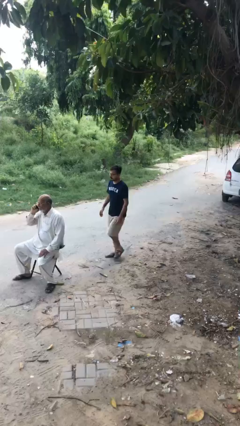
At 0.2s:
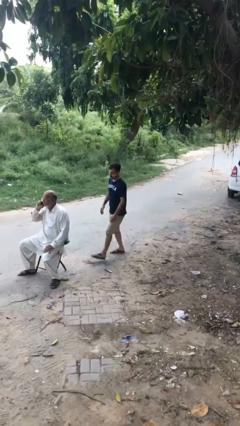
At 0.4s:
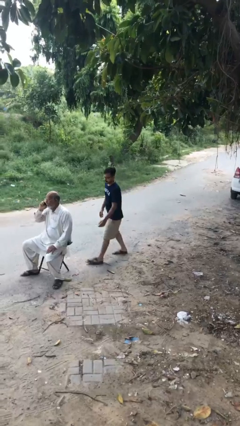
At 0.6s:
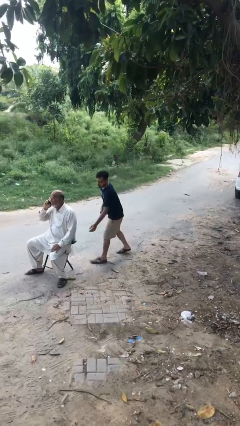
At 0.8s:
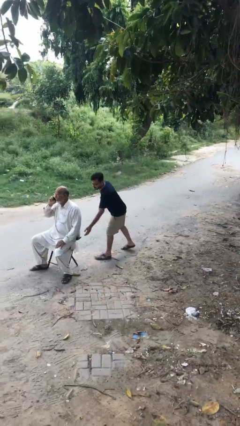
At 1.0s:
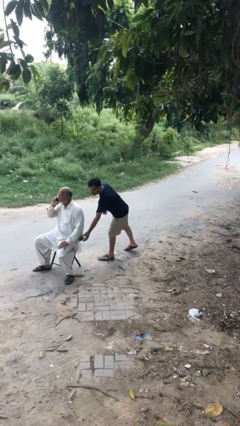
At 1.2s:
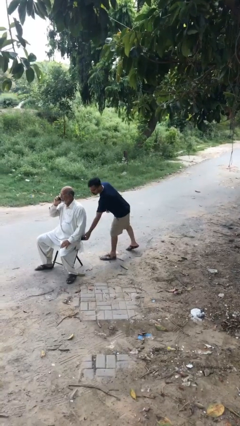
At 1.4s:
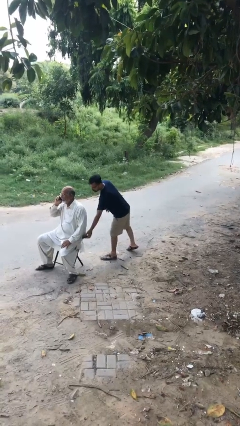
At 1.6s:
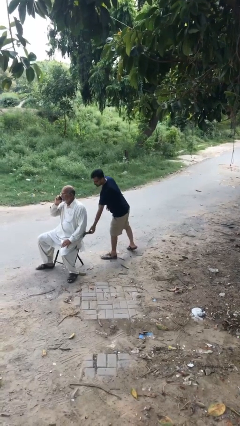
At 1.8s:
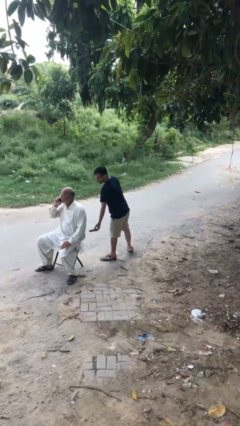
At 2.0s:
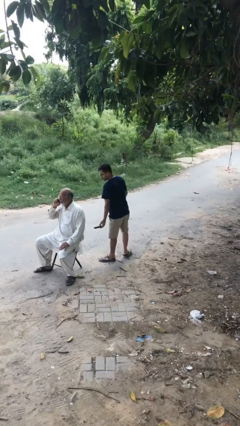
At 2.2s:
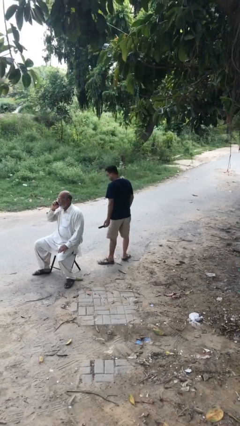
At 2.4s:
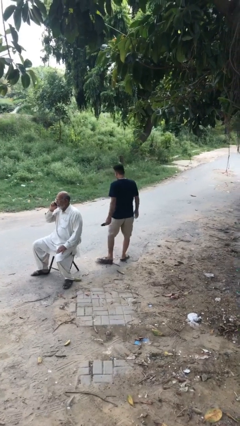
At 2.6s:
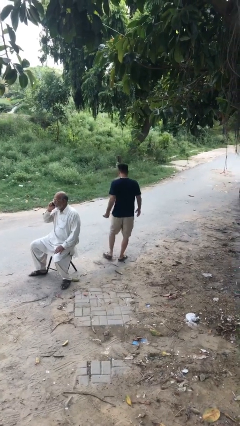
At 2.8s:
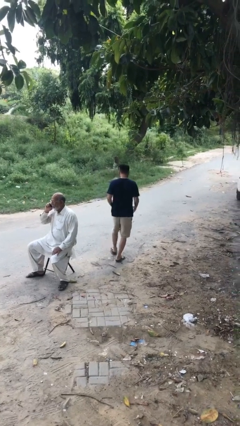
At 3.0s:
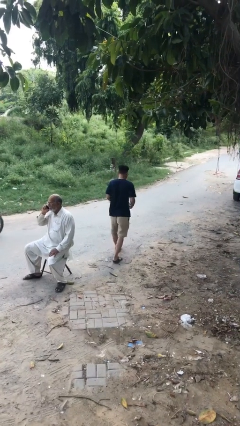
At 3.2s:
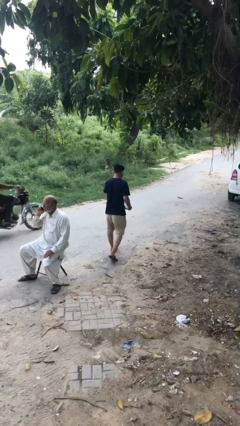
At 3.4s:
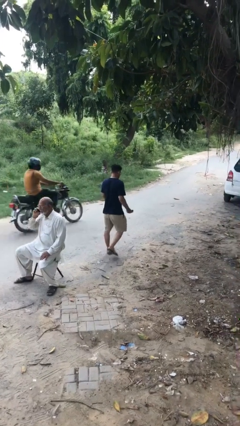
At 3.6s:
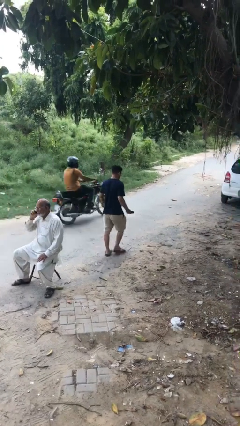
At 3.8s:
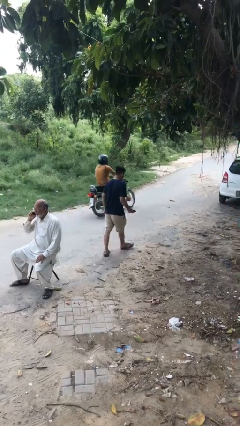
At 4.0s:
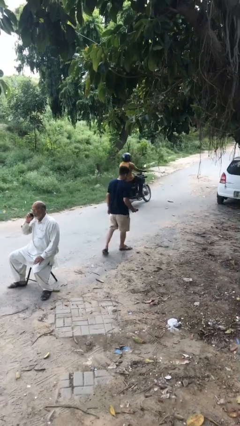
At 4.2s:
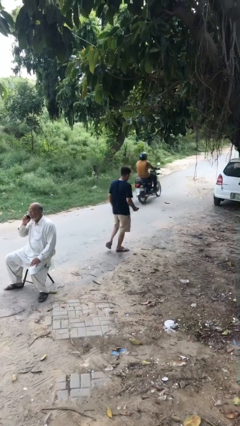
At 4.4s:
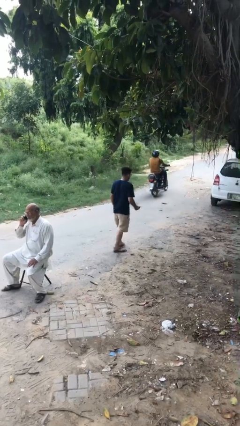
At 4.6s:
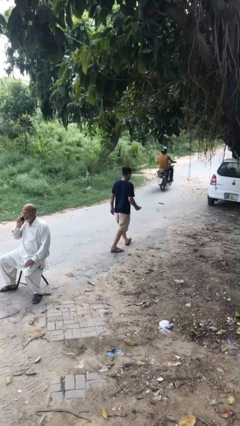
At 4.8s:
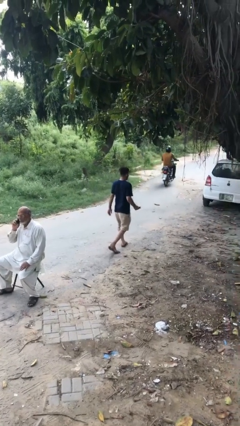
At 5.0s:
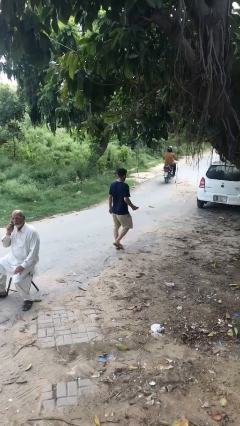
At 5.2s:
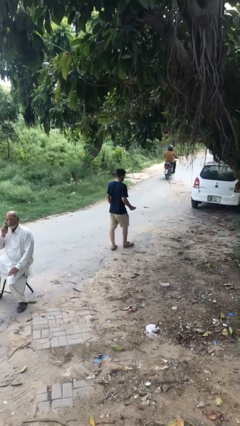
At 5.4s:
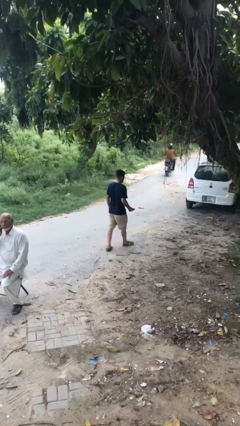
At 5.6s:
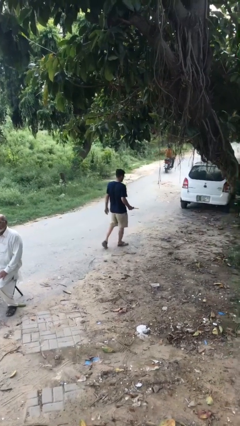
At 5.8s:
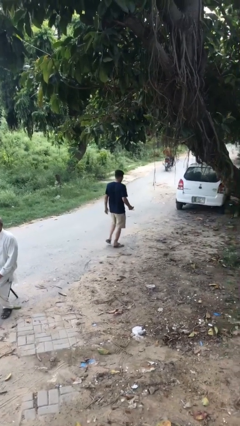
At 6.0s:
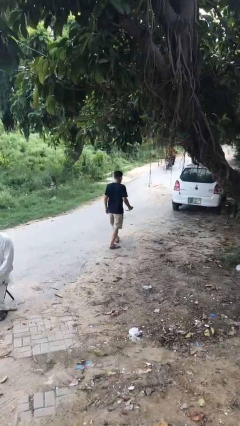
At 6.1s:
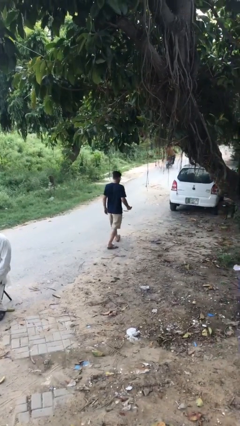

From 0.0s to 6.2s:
person steals object from person

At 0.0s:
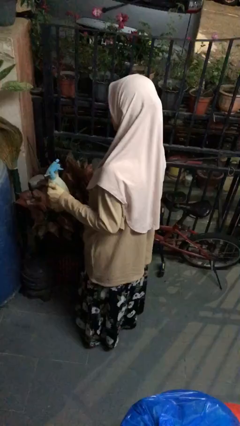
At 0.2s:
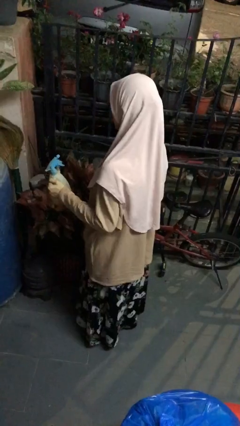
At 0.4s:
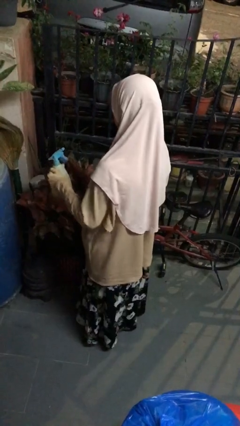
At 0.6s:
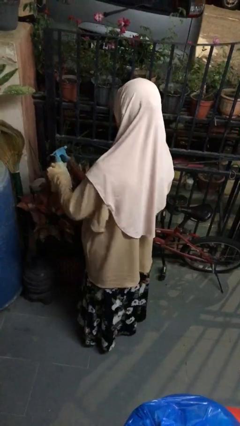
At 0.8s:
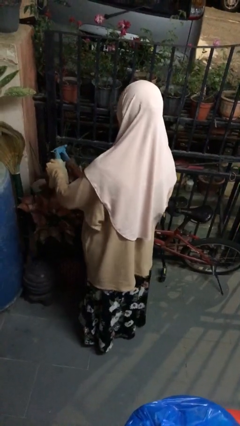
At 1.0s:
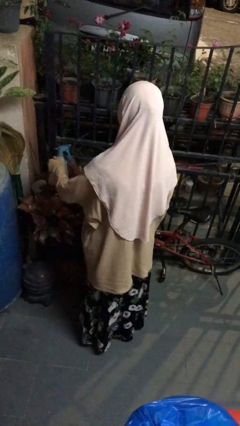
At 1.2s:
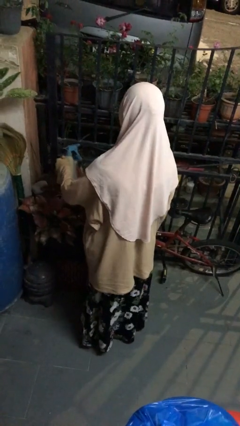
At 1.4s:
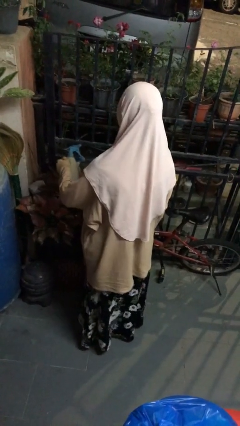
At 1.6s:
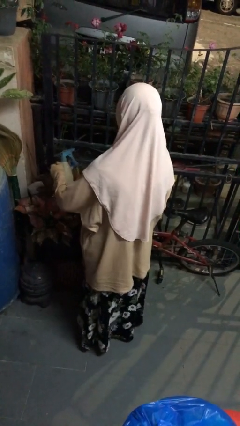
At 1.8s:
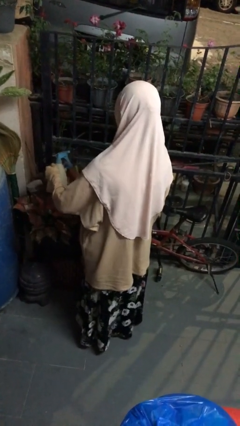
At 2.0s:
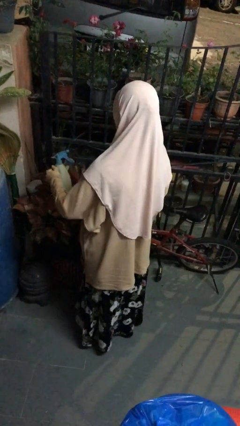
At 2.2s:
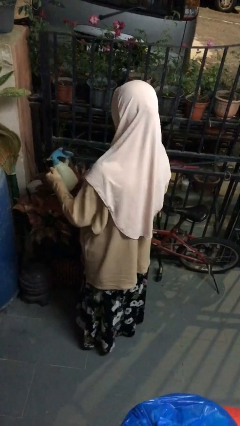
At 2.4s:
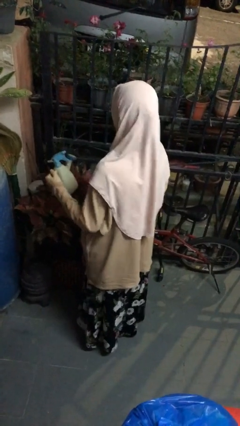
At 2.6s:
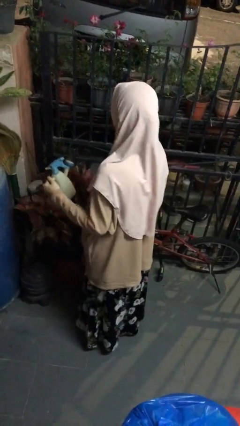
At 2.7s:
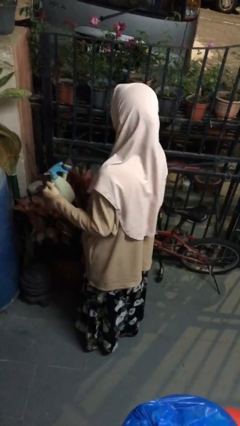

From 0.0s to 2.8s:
person waters houseplant

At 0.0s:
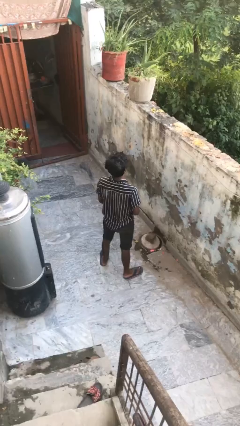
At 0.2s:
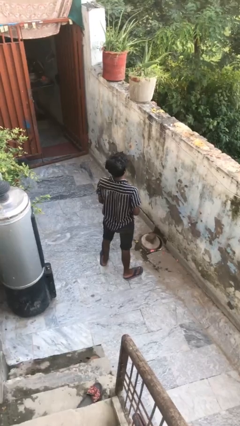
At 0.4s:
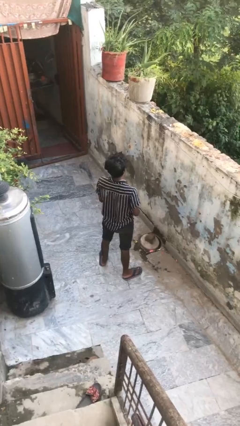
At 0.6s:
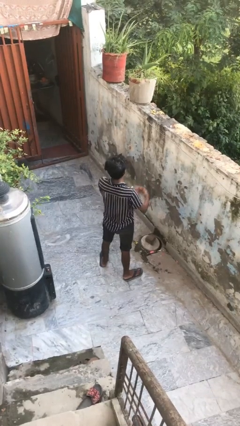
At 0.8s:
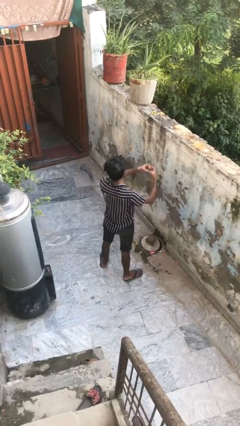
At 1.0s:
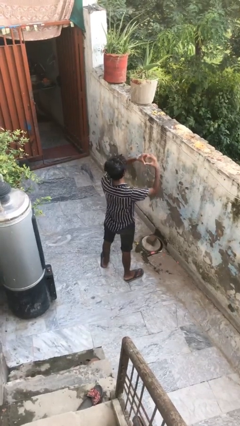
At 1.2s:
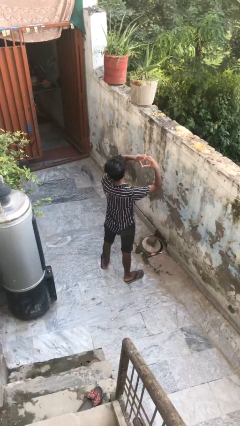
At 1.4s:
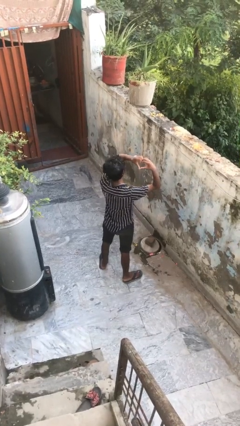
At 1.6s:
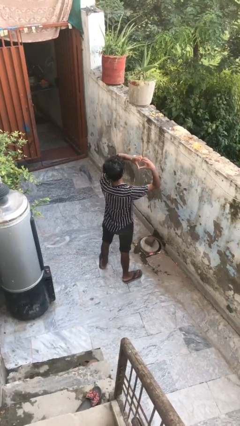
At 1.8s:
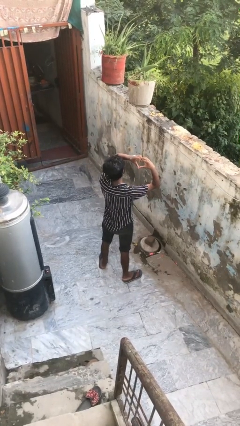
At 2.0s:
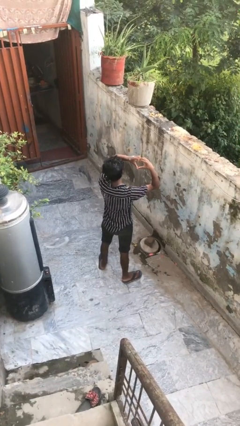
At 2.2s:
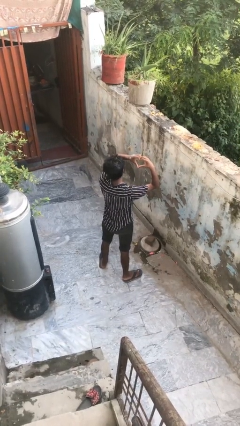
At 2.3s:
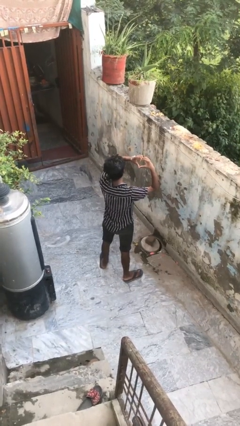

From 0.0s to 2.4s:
person gestures heart

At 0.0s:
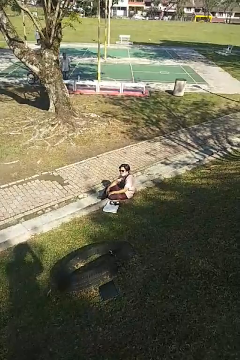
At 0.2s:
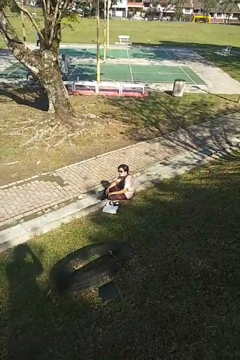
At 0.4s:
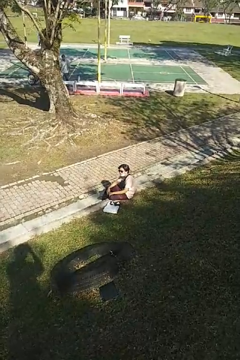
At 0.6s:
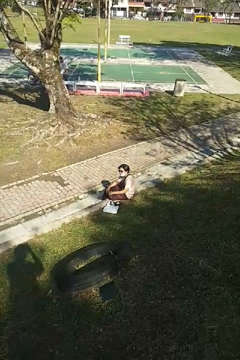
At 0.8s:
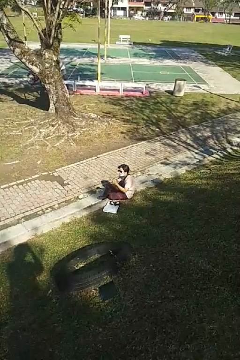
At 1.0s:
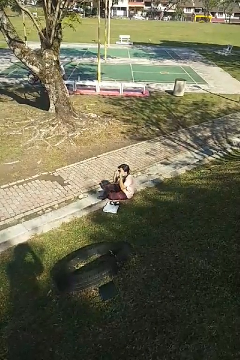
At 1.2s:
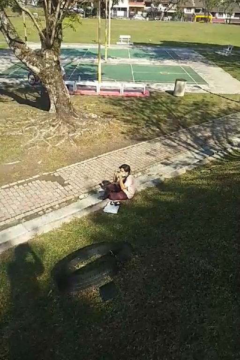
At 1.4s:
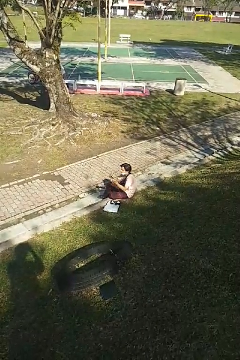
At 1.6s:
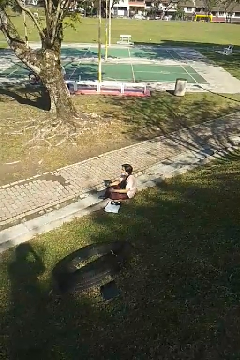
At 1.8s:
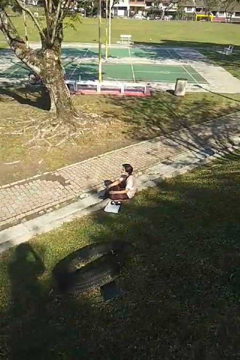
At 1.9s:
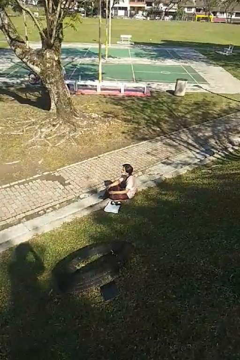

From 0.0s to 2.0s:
person takes off sunglasses

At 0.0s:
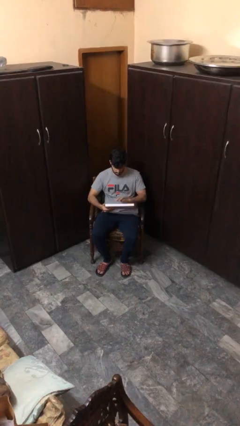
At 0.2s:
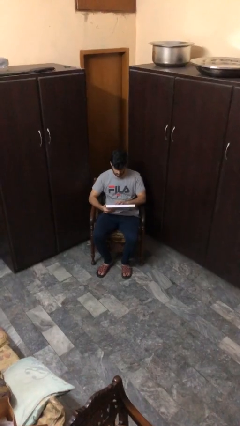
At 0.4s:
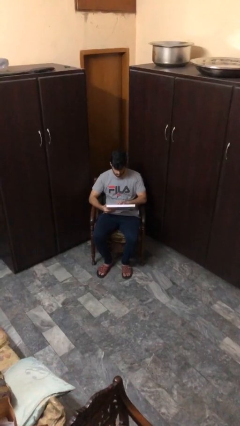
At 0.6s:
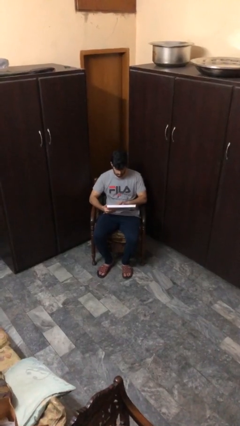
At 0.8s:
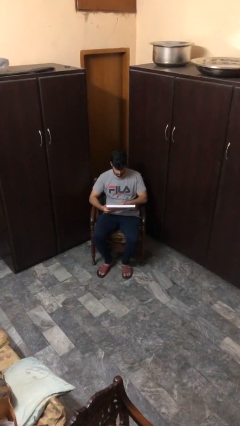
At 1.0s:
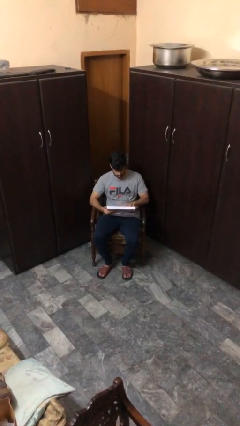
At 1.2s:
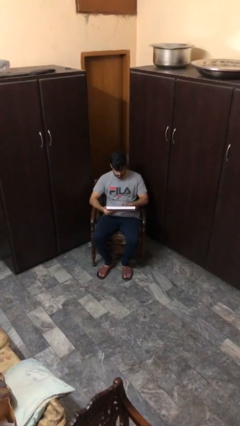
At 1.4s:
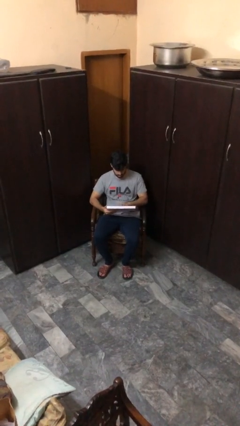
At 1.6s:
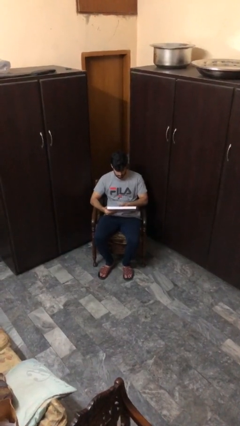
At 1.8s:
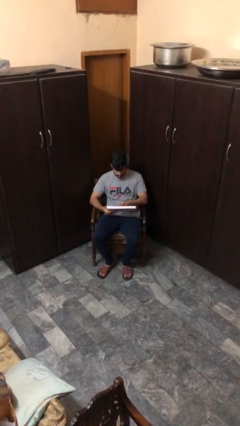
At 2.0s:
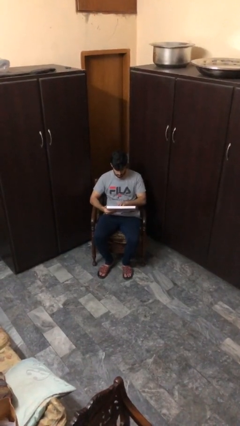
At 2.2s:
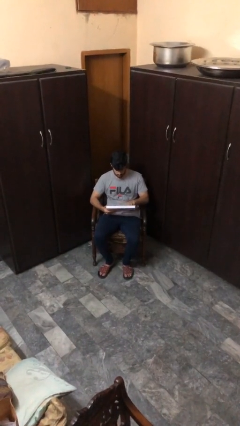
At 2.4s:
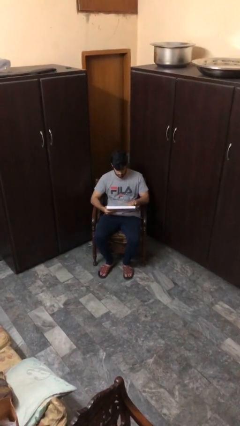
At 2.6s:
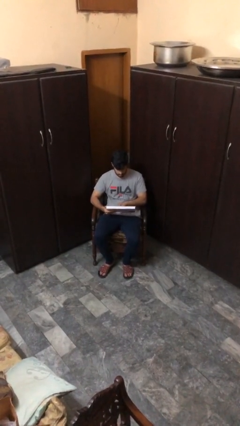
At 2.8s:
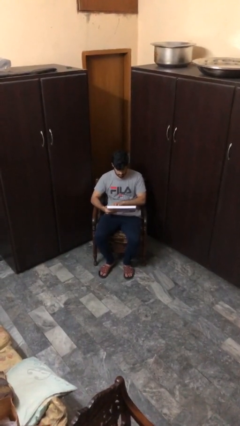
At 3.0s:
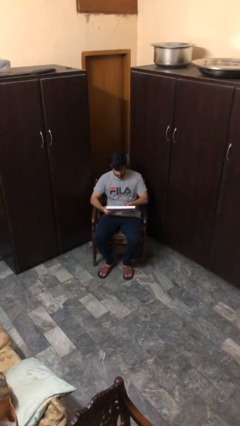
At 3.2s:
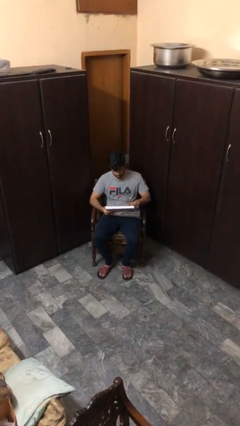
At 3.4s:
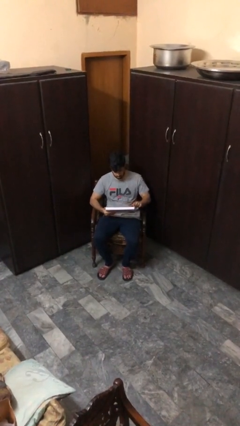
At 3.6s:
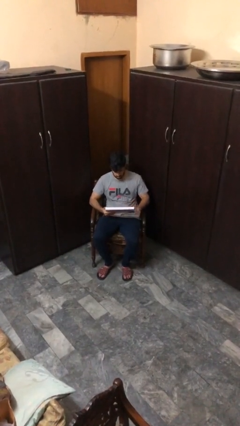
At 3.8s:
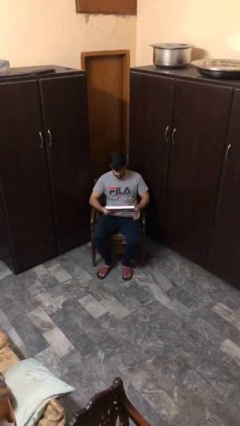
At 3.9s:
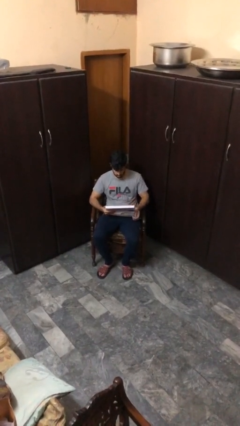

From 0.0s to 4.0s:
person interacts with tablet

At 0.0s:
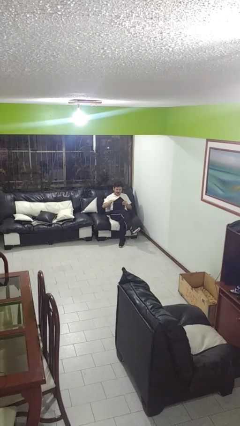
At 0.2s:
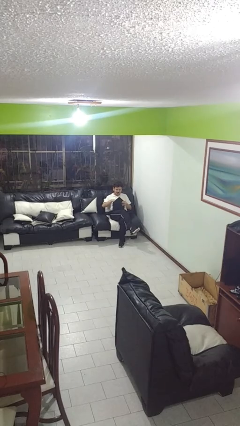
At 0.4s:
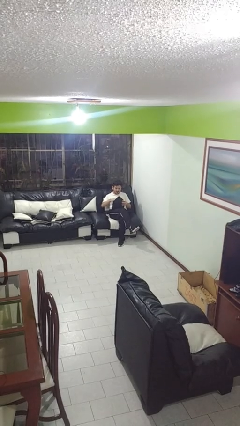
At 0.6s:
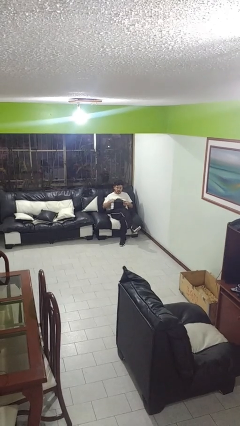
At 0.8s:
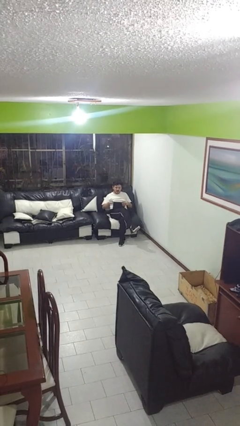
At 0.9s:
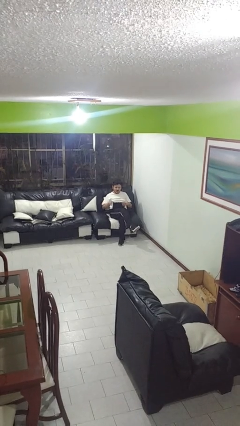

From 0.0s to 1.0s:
person puts object into purse
